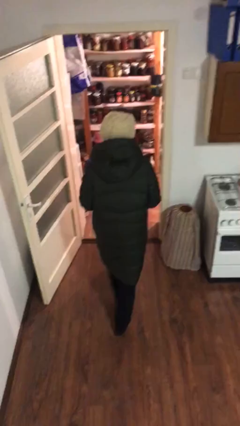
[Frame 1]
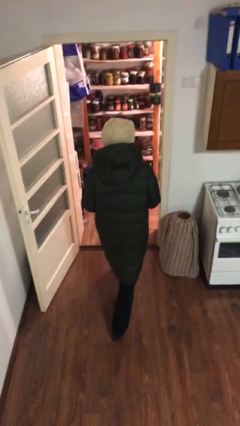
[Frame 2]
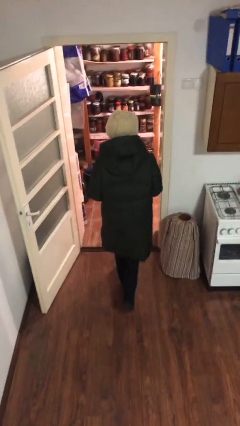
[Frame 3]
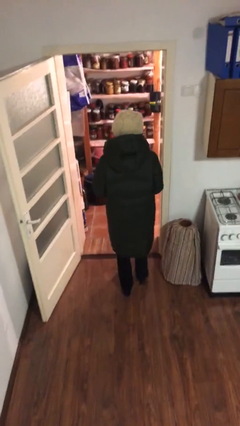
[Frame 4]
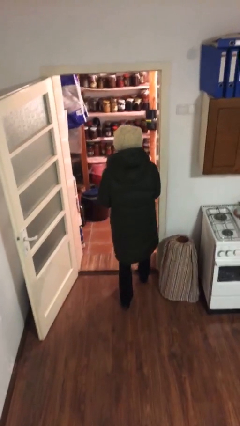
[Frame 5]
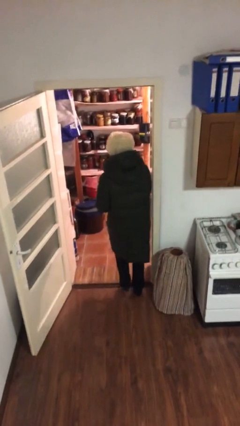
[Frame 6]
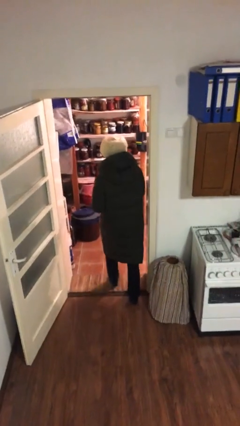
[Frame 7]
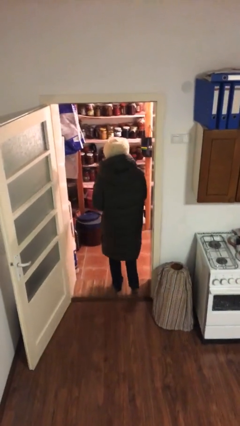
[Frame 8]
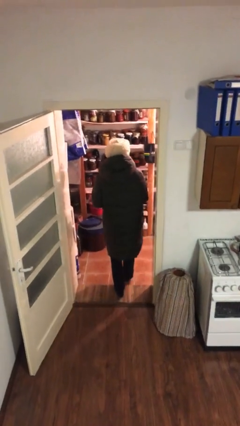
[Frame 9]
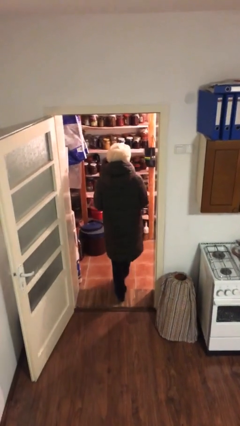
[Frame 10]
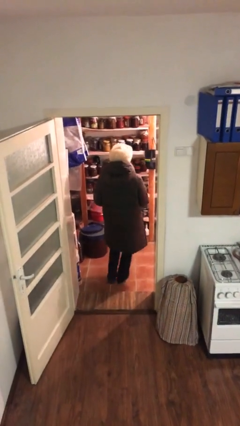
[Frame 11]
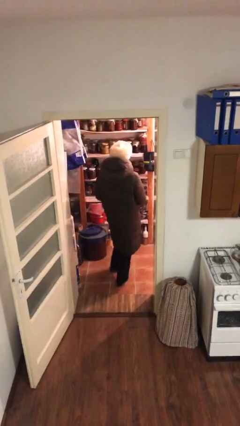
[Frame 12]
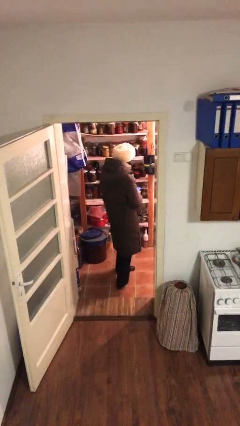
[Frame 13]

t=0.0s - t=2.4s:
person exits scene through structure

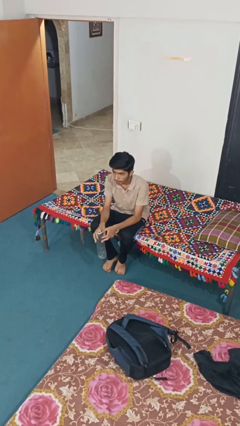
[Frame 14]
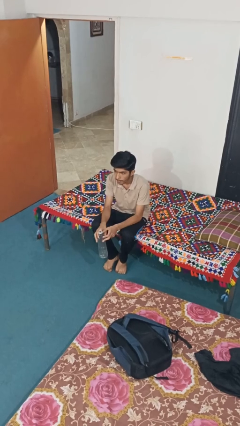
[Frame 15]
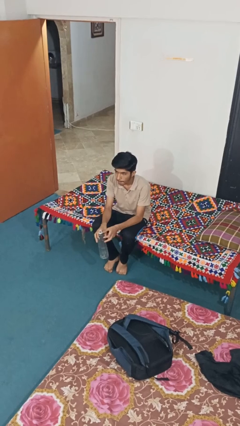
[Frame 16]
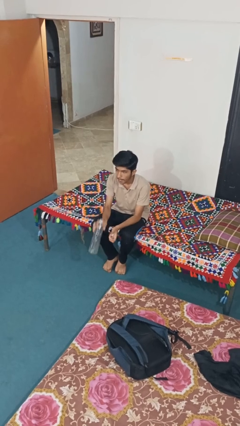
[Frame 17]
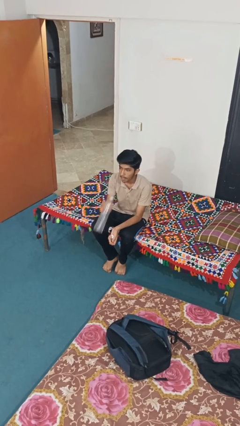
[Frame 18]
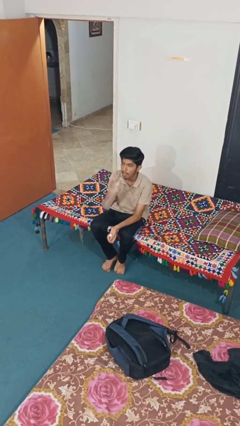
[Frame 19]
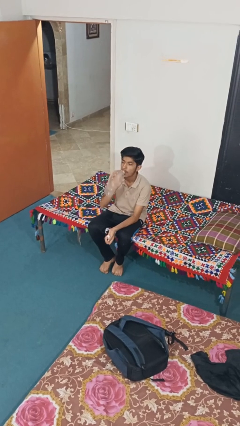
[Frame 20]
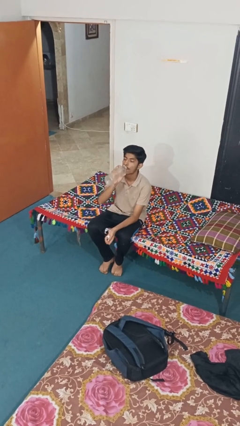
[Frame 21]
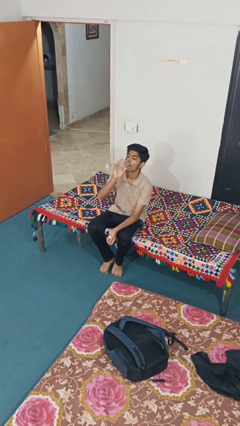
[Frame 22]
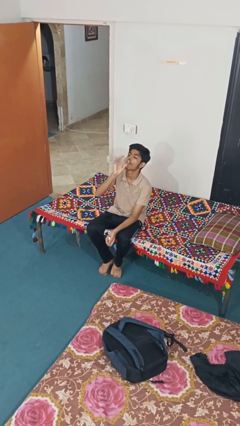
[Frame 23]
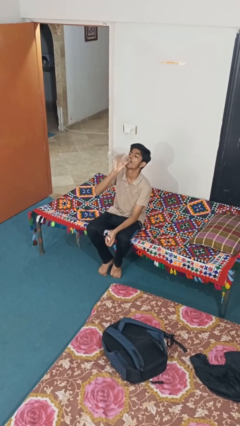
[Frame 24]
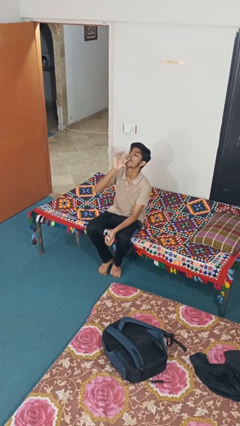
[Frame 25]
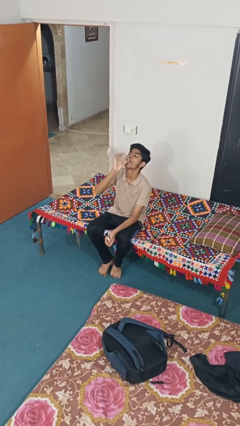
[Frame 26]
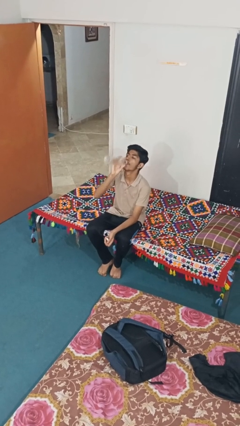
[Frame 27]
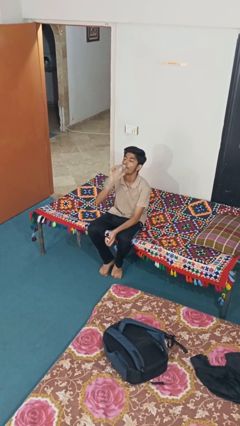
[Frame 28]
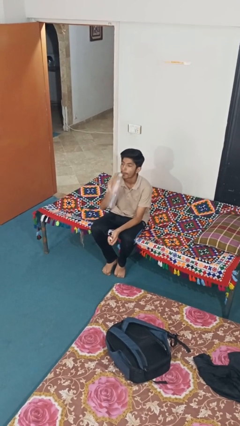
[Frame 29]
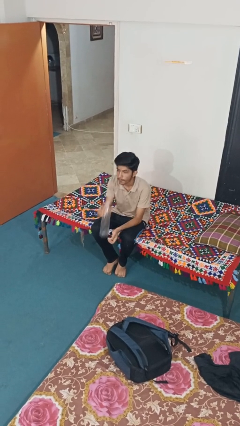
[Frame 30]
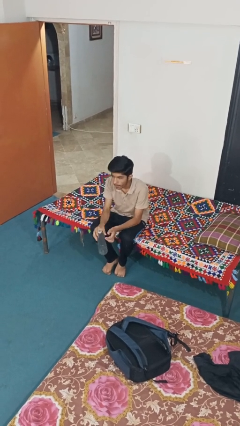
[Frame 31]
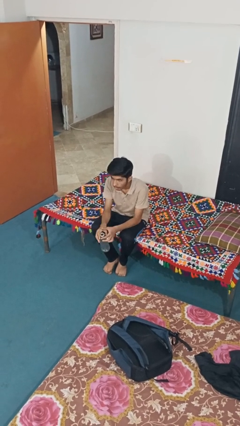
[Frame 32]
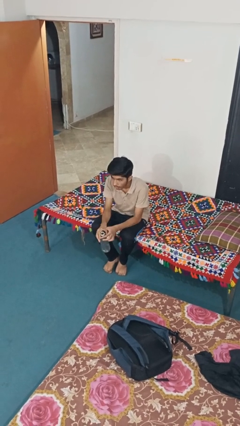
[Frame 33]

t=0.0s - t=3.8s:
person drinks from bottle

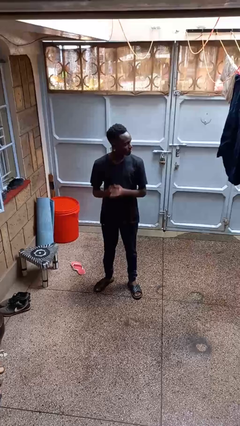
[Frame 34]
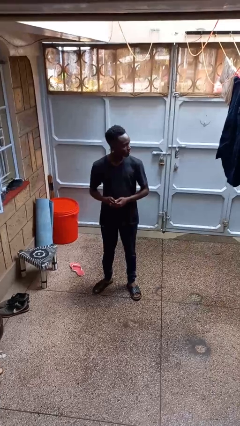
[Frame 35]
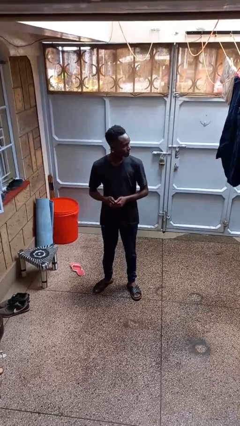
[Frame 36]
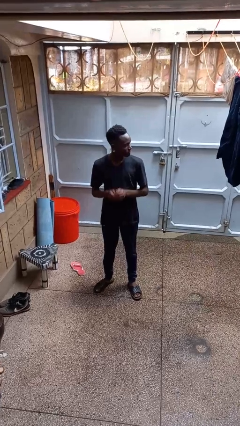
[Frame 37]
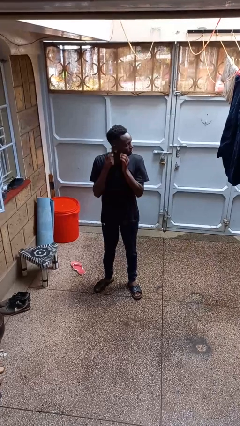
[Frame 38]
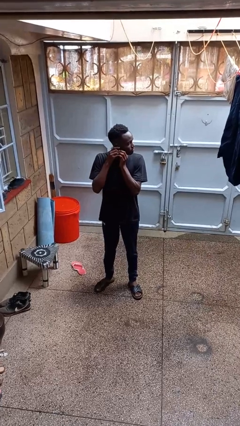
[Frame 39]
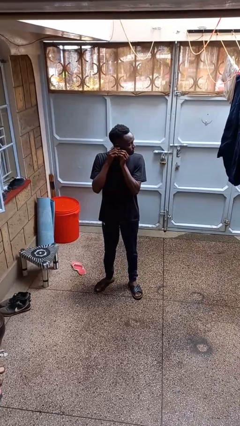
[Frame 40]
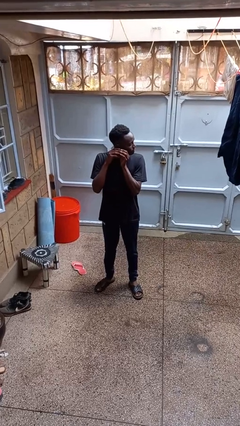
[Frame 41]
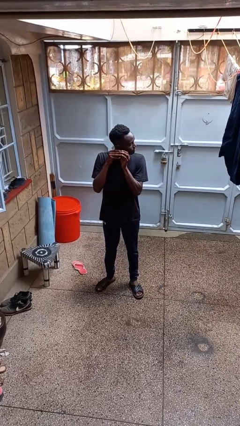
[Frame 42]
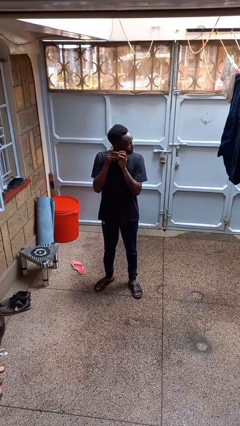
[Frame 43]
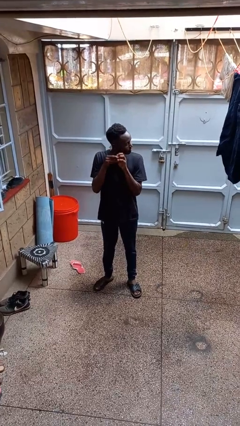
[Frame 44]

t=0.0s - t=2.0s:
person takes off earrings

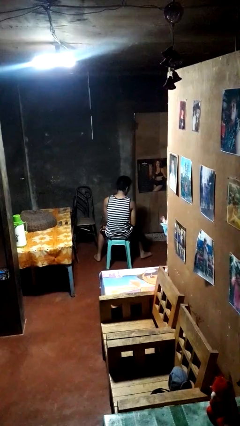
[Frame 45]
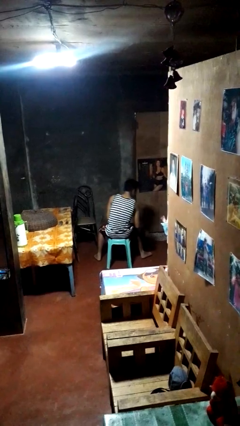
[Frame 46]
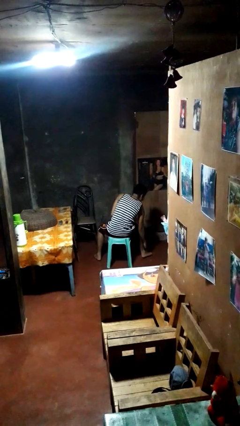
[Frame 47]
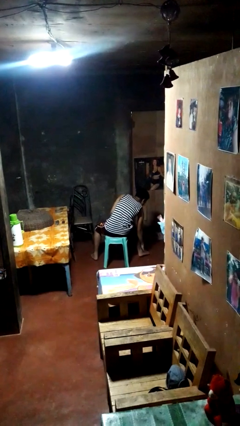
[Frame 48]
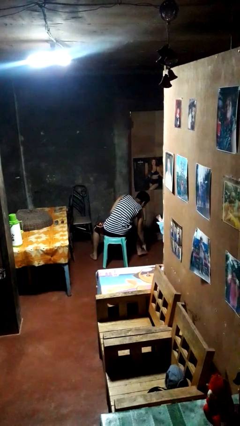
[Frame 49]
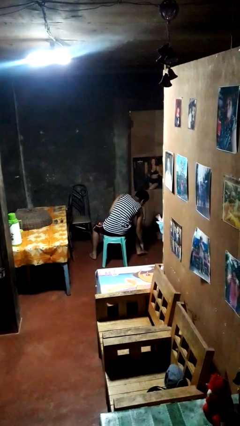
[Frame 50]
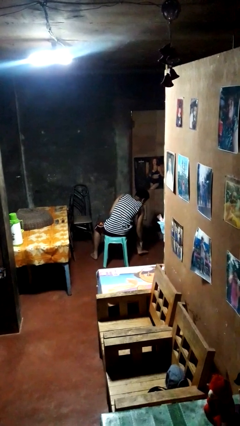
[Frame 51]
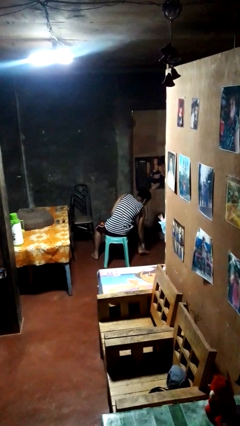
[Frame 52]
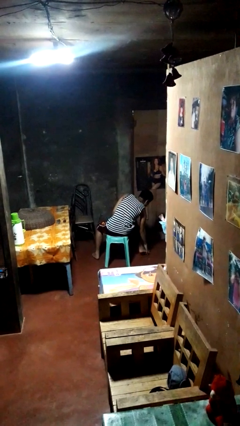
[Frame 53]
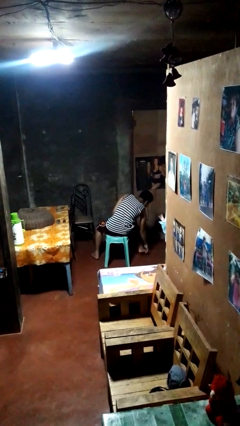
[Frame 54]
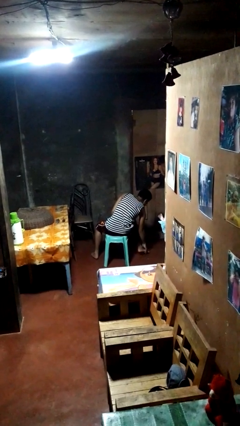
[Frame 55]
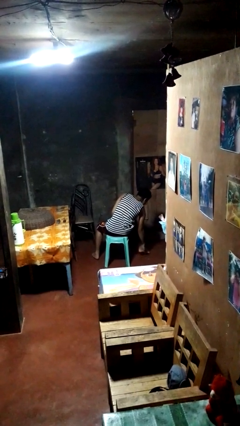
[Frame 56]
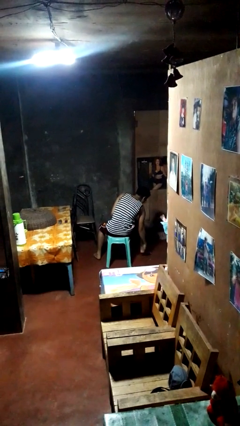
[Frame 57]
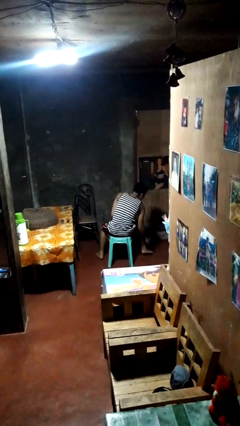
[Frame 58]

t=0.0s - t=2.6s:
person rubs foot

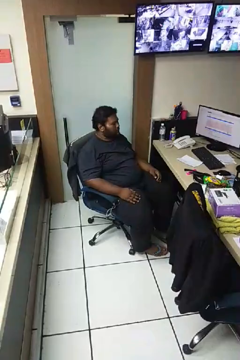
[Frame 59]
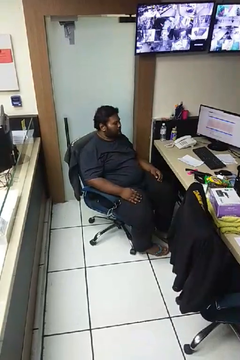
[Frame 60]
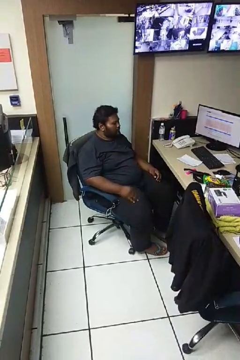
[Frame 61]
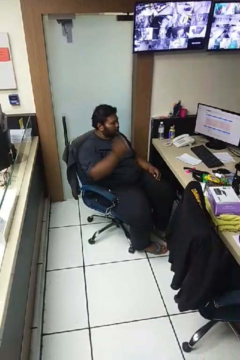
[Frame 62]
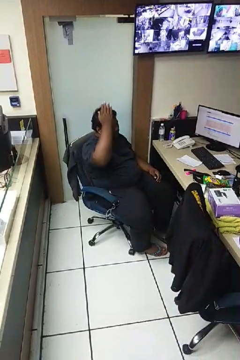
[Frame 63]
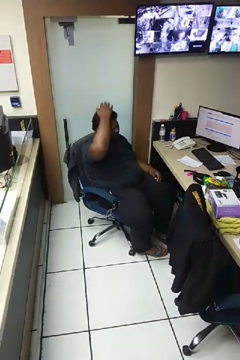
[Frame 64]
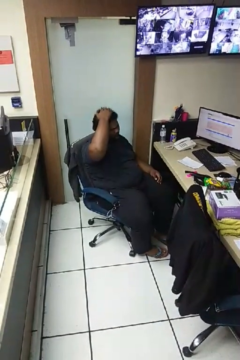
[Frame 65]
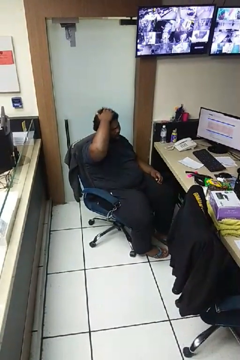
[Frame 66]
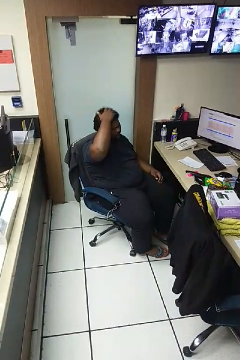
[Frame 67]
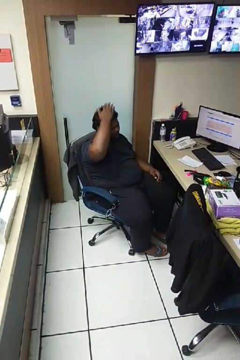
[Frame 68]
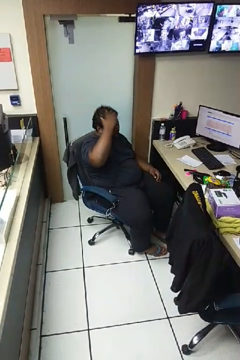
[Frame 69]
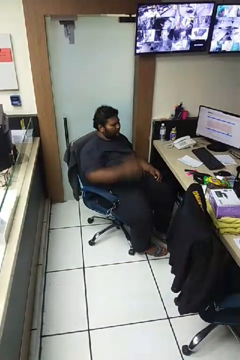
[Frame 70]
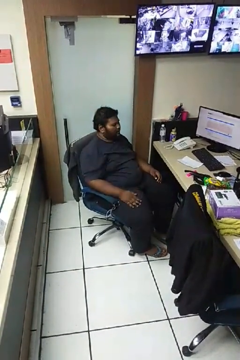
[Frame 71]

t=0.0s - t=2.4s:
person pats head

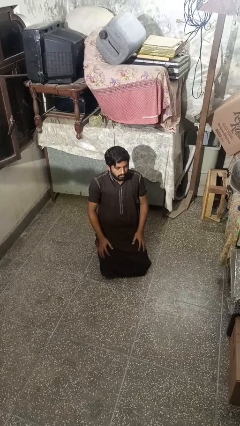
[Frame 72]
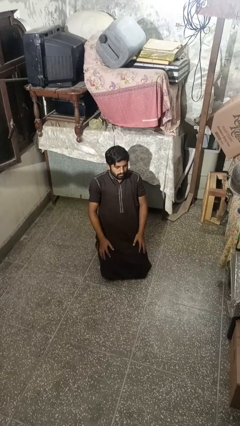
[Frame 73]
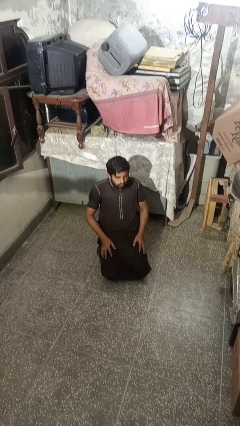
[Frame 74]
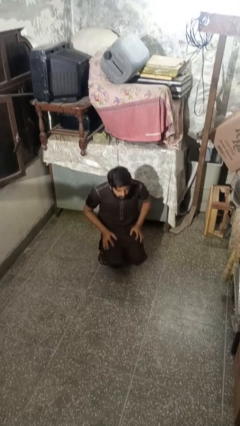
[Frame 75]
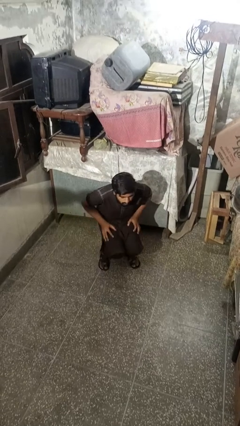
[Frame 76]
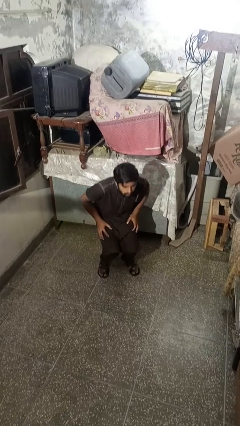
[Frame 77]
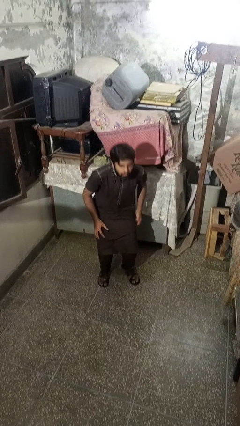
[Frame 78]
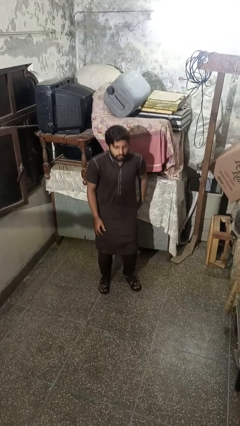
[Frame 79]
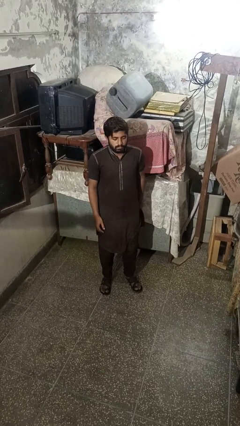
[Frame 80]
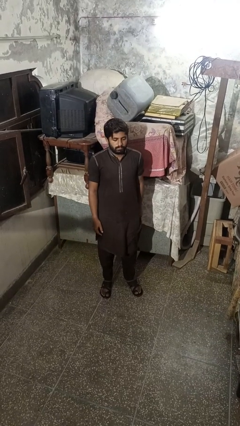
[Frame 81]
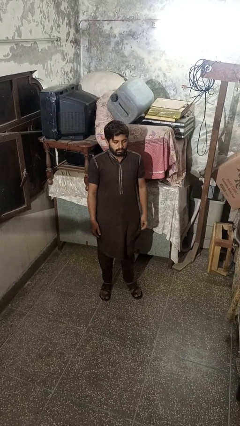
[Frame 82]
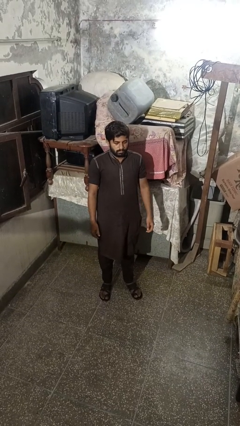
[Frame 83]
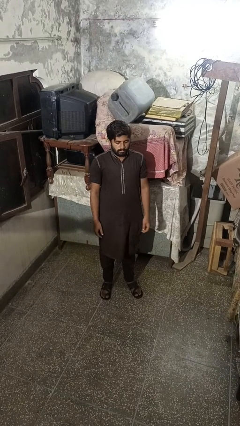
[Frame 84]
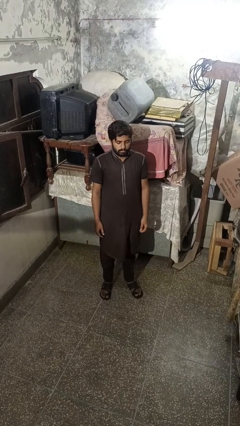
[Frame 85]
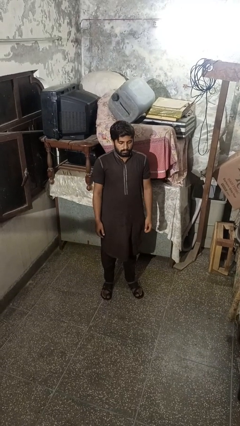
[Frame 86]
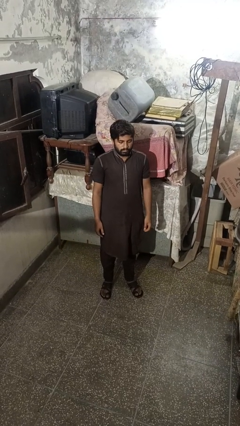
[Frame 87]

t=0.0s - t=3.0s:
person stands up from floor

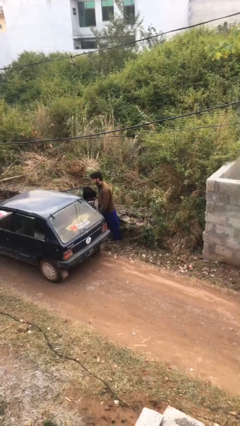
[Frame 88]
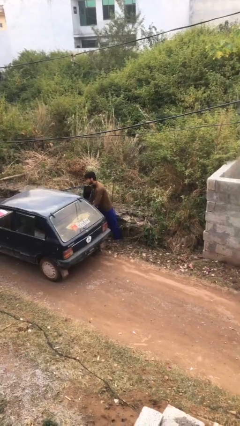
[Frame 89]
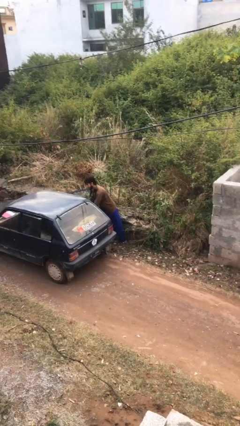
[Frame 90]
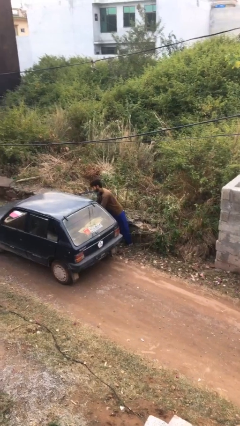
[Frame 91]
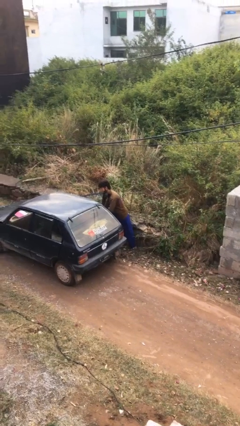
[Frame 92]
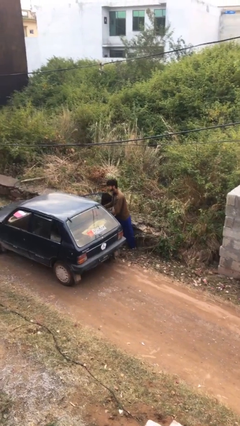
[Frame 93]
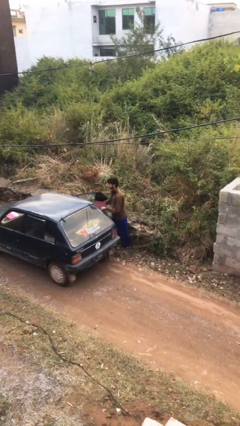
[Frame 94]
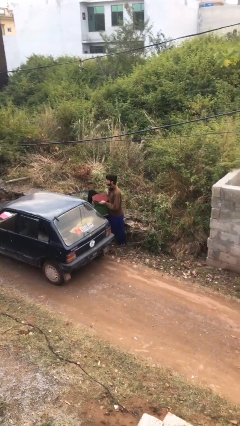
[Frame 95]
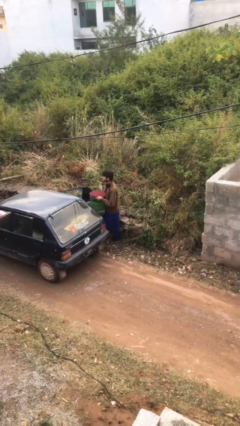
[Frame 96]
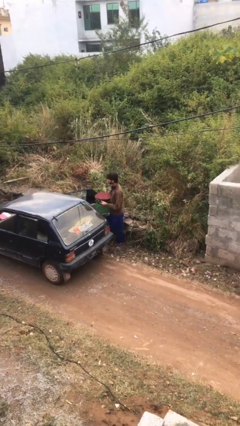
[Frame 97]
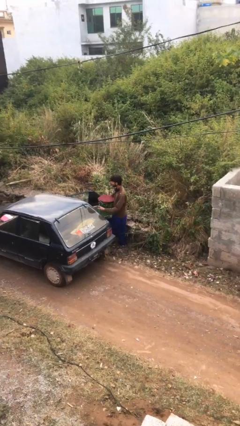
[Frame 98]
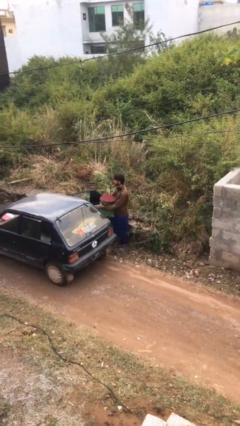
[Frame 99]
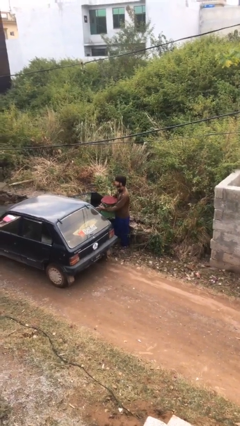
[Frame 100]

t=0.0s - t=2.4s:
person unloads car
